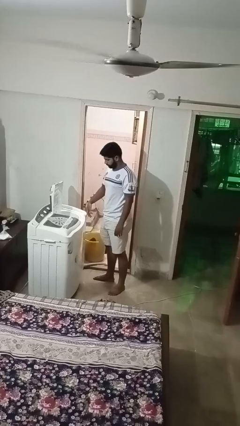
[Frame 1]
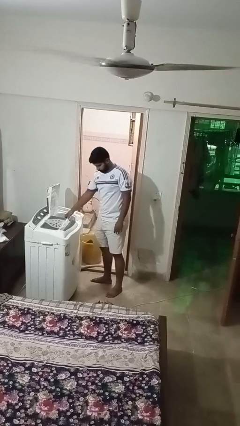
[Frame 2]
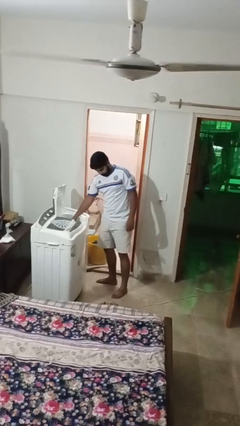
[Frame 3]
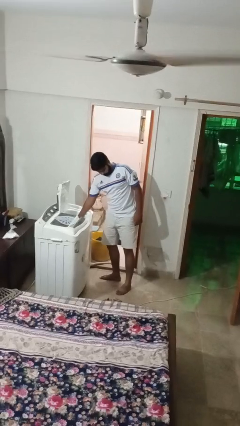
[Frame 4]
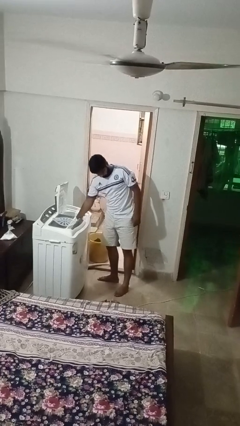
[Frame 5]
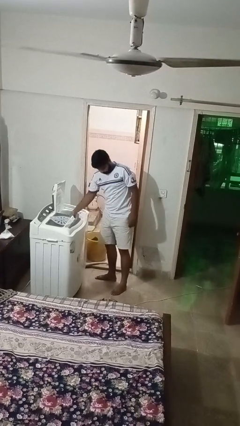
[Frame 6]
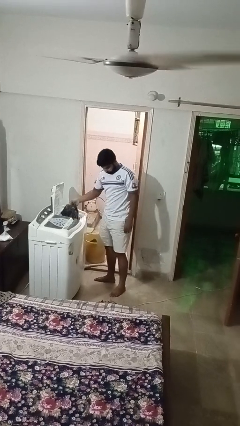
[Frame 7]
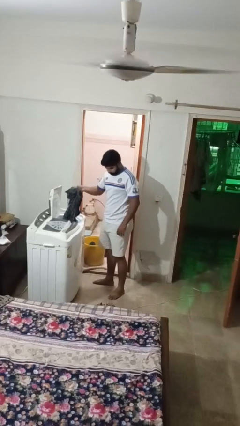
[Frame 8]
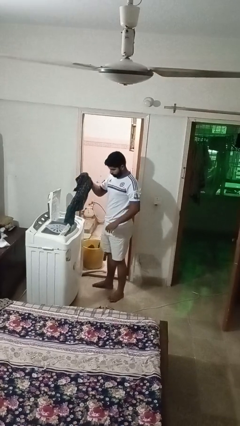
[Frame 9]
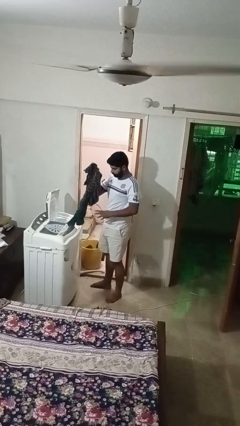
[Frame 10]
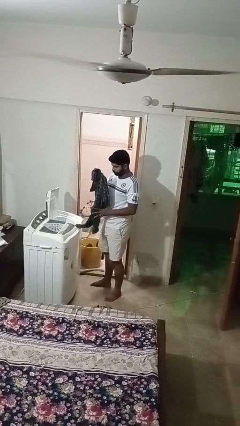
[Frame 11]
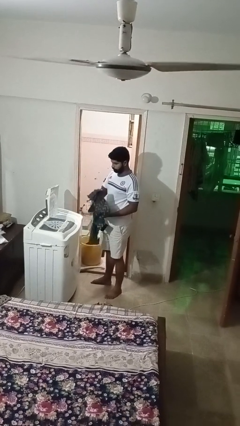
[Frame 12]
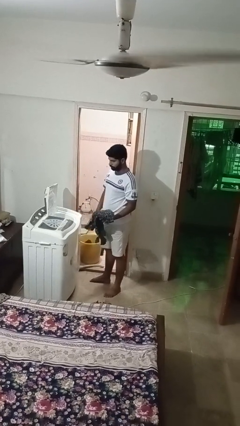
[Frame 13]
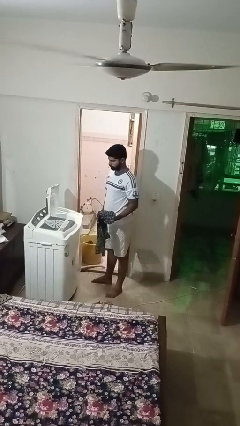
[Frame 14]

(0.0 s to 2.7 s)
person unloads dryer

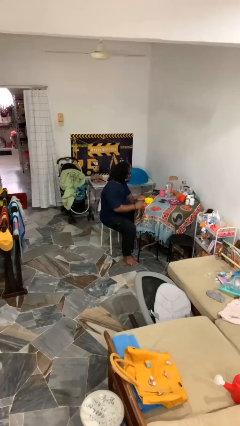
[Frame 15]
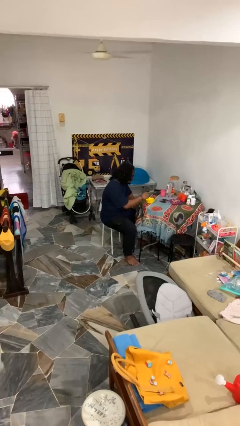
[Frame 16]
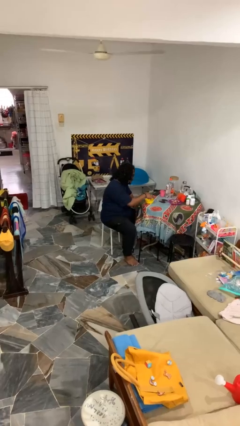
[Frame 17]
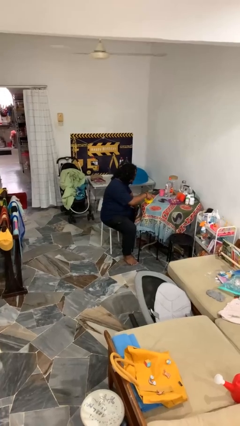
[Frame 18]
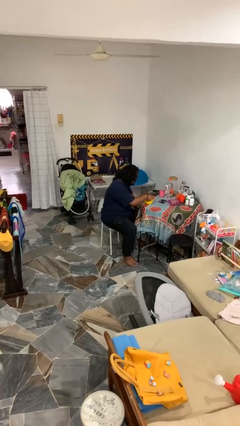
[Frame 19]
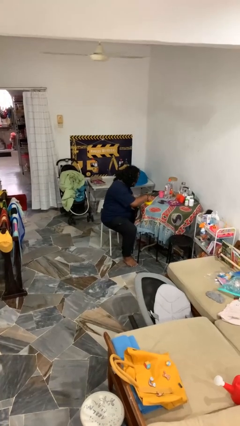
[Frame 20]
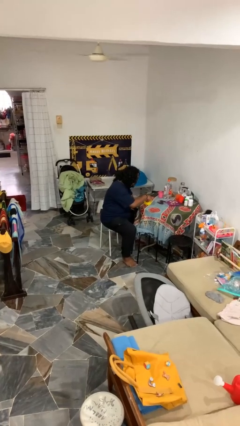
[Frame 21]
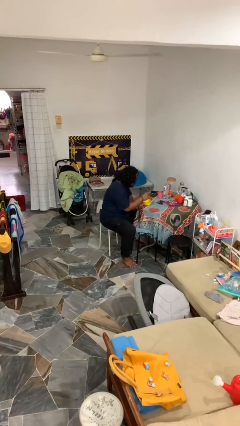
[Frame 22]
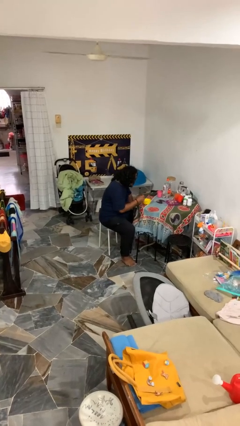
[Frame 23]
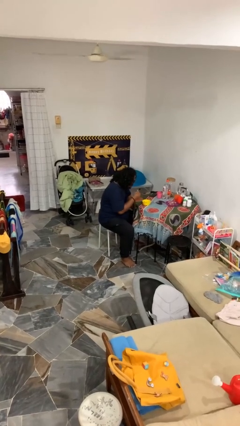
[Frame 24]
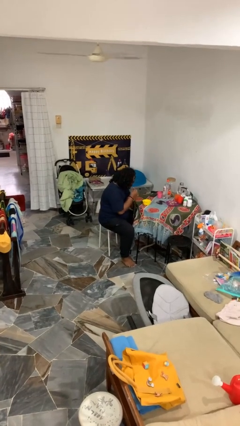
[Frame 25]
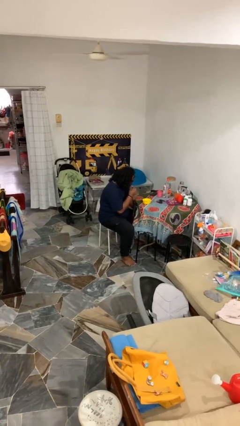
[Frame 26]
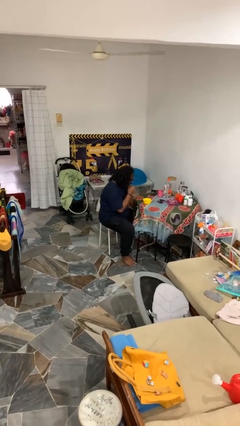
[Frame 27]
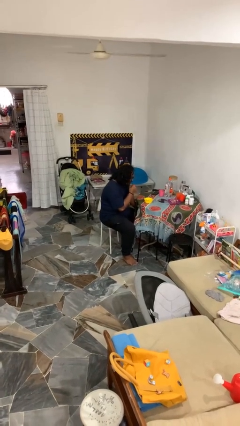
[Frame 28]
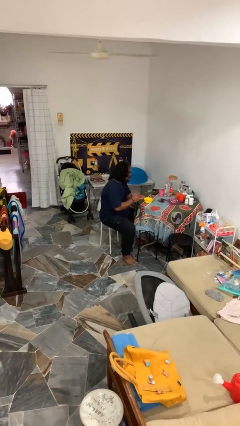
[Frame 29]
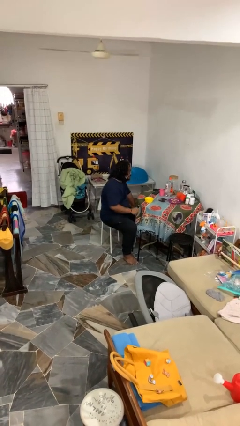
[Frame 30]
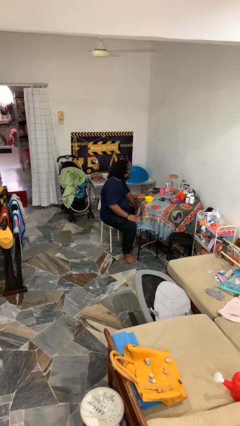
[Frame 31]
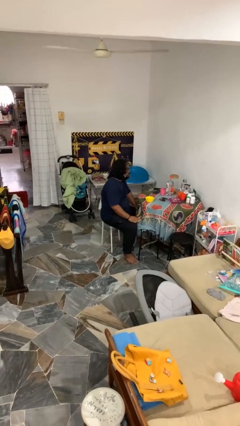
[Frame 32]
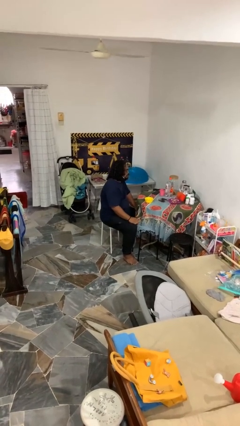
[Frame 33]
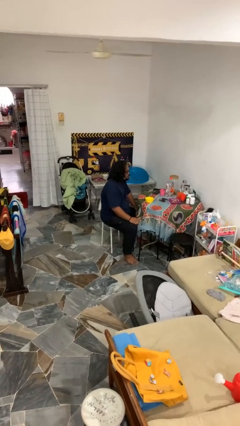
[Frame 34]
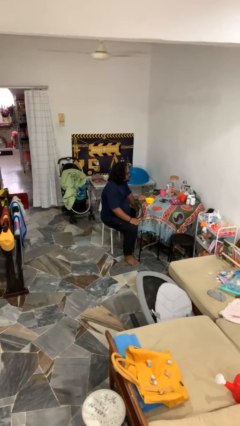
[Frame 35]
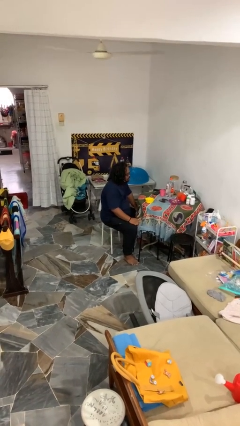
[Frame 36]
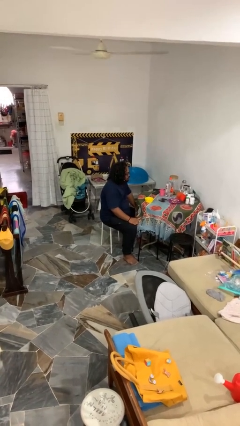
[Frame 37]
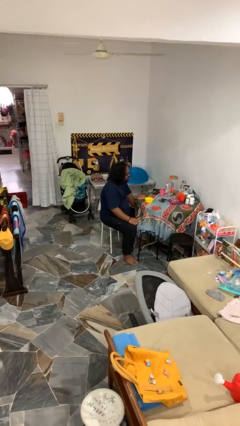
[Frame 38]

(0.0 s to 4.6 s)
person eats with hands

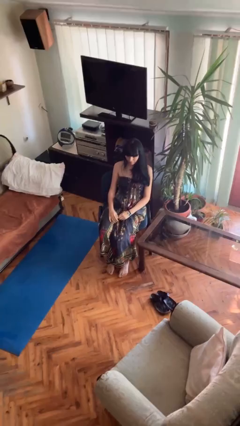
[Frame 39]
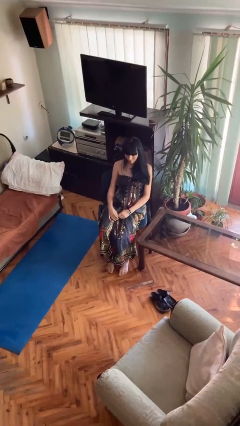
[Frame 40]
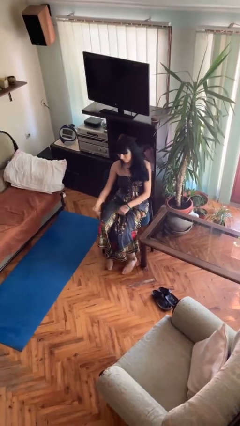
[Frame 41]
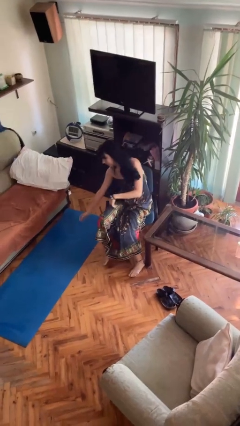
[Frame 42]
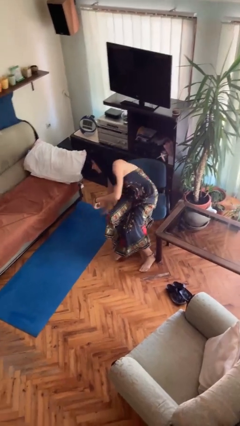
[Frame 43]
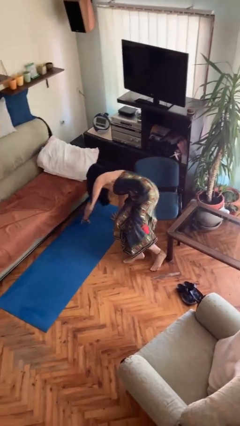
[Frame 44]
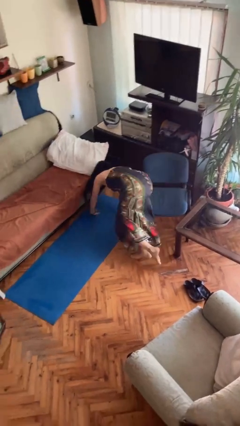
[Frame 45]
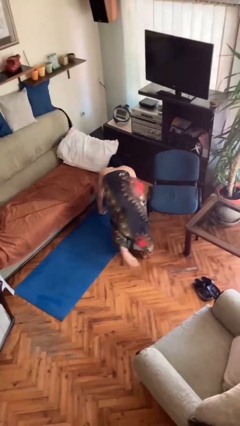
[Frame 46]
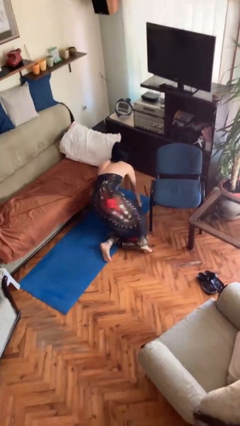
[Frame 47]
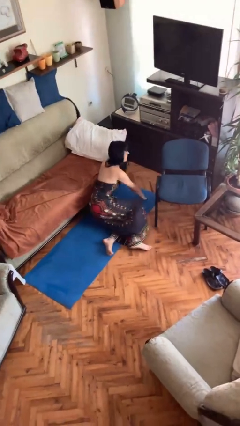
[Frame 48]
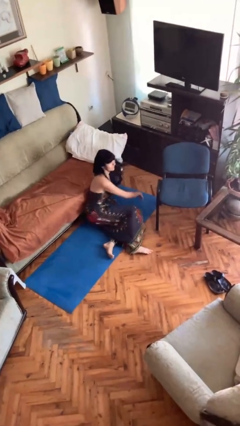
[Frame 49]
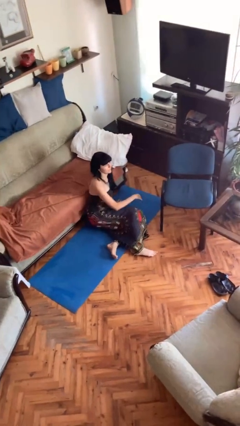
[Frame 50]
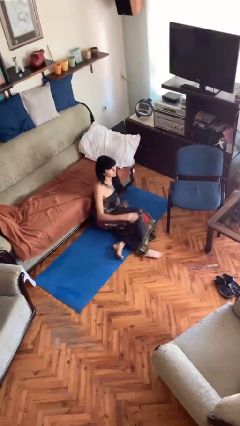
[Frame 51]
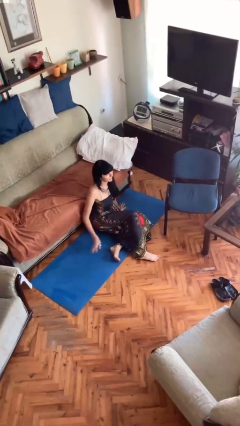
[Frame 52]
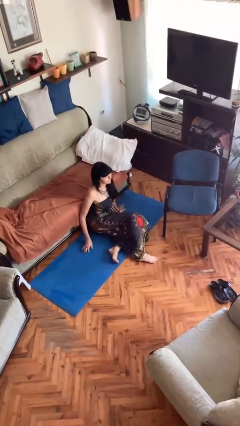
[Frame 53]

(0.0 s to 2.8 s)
person falls from chair

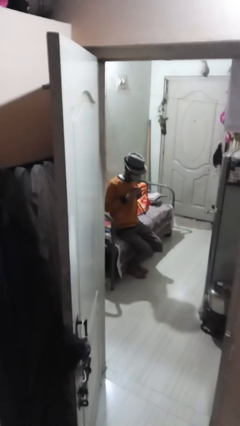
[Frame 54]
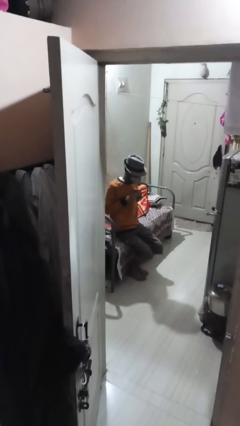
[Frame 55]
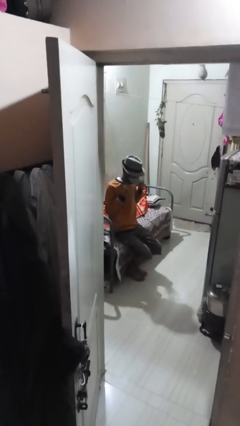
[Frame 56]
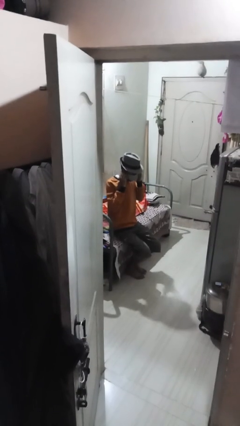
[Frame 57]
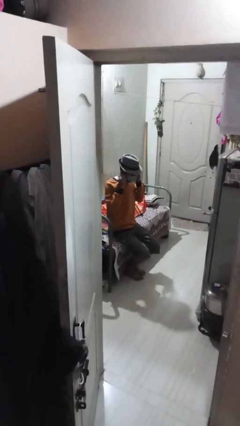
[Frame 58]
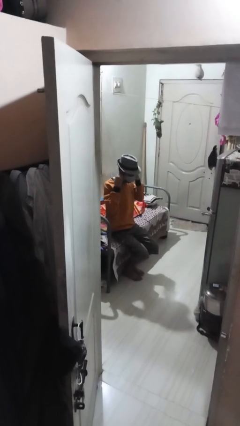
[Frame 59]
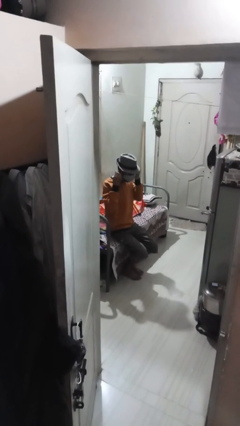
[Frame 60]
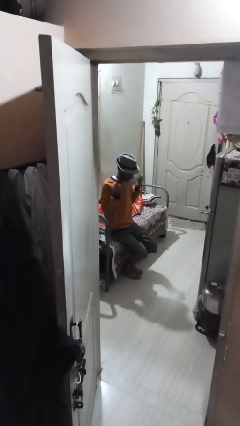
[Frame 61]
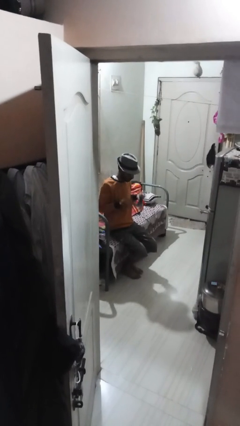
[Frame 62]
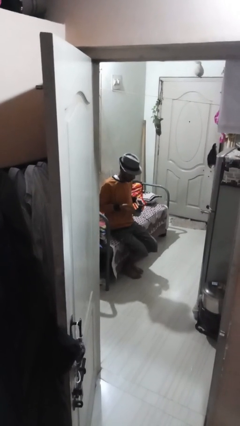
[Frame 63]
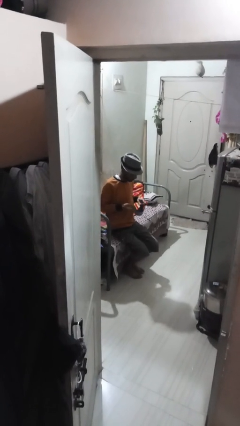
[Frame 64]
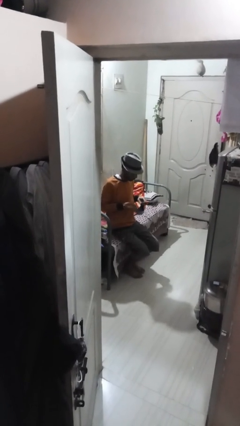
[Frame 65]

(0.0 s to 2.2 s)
person takes off facemask

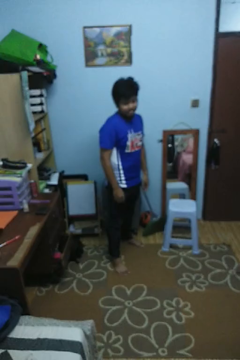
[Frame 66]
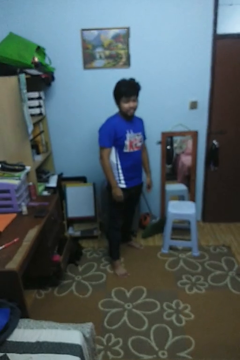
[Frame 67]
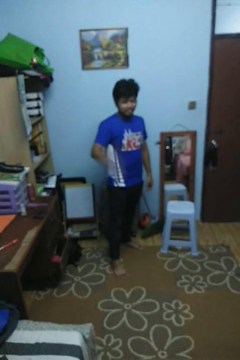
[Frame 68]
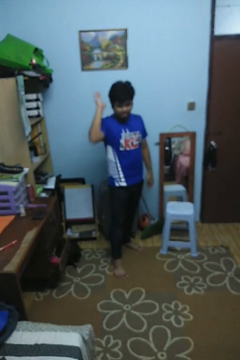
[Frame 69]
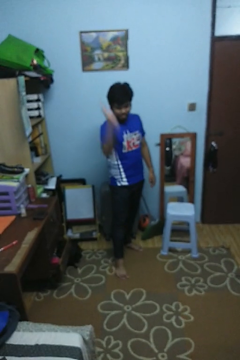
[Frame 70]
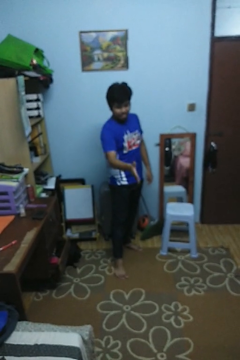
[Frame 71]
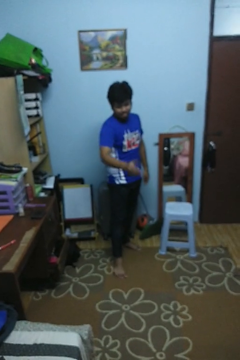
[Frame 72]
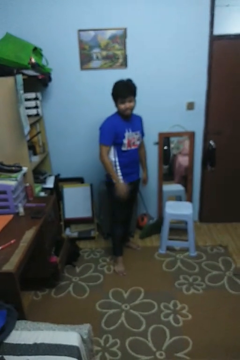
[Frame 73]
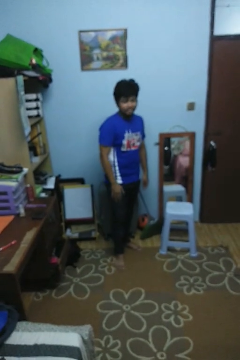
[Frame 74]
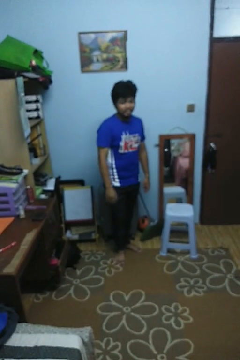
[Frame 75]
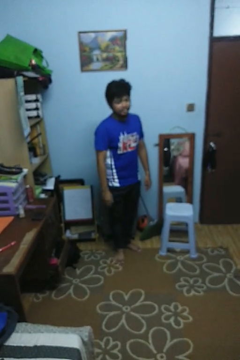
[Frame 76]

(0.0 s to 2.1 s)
person karate chop

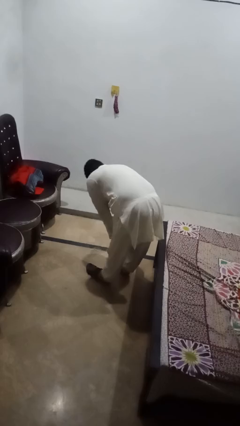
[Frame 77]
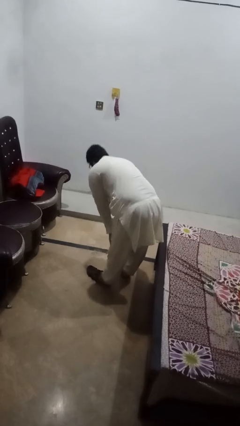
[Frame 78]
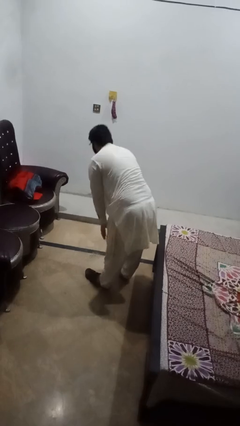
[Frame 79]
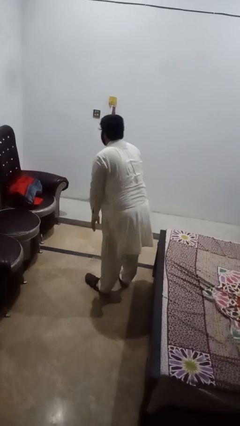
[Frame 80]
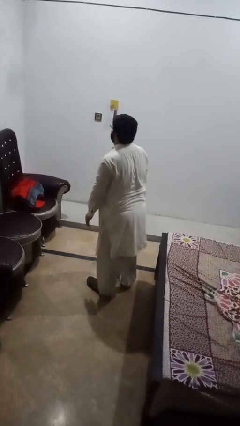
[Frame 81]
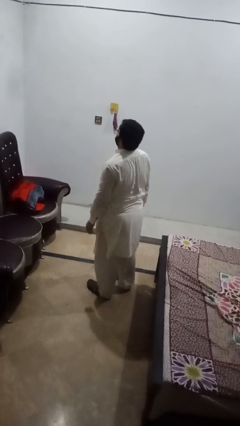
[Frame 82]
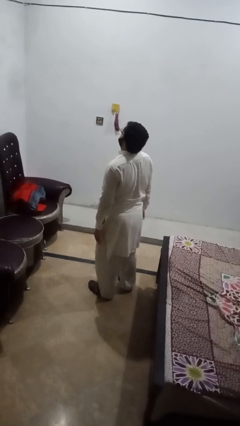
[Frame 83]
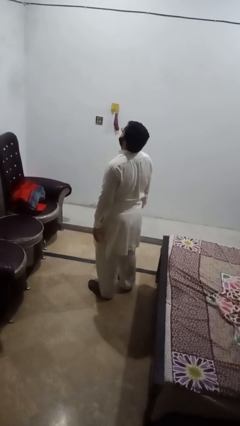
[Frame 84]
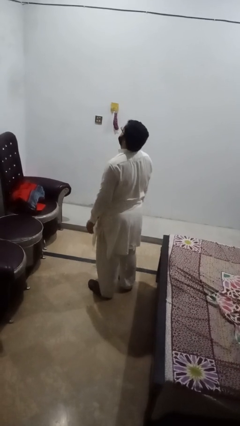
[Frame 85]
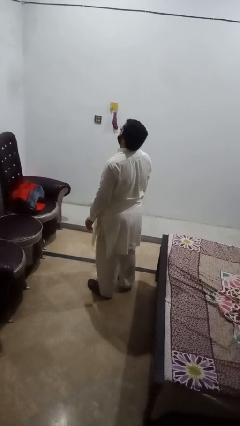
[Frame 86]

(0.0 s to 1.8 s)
person stands up

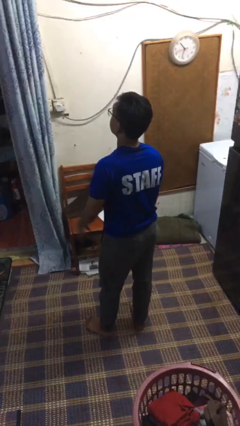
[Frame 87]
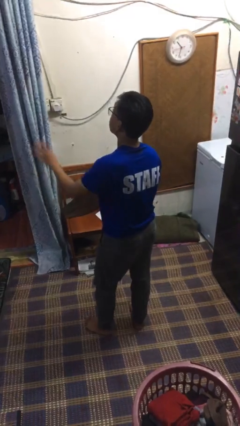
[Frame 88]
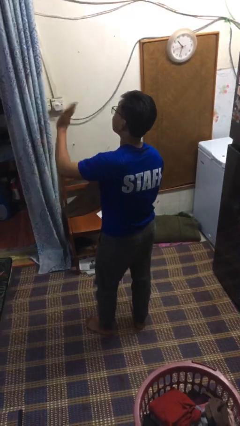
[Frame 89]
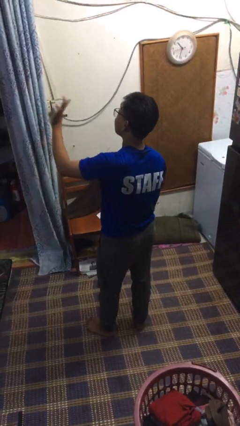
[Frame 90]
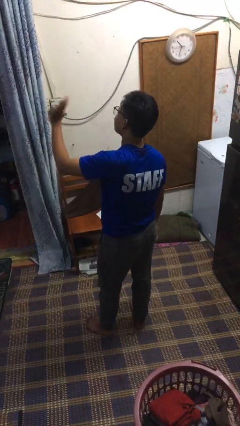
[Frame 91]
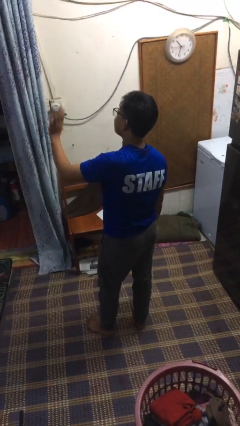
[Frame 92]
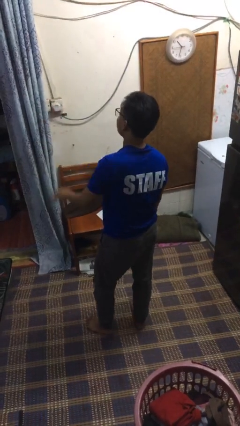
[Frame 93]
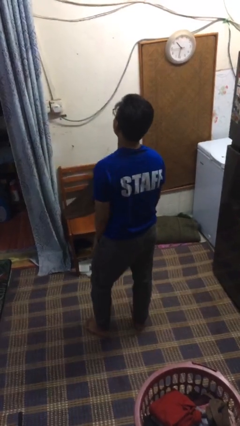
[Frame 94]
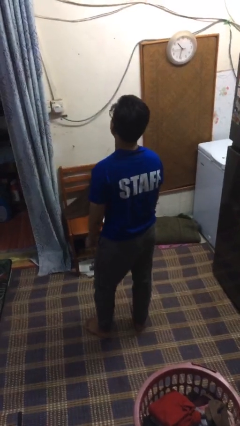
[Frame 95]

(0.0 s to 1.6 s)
person waves at person
